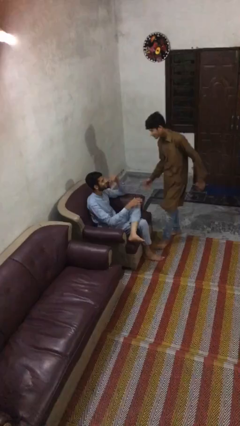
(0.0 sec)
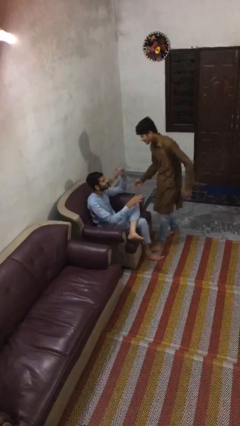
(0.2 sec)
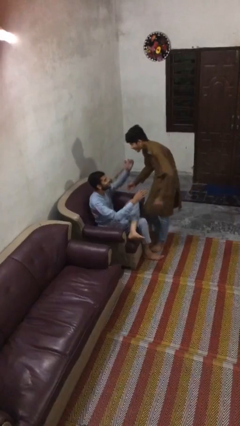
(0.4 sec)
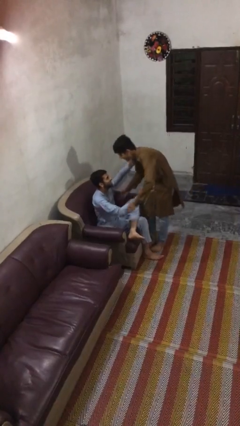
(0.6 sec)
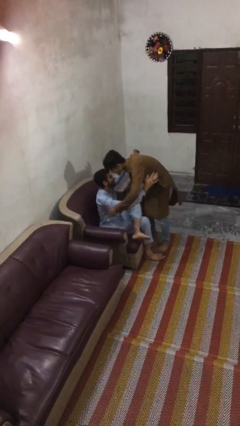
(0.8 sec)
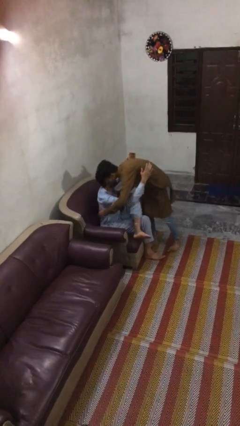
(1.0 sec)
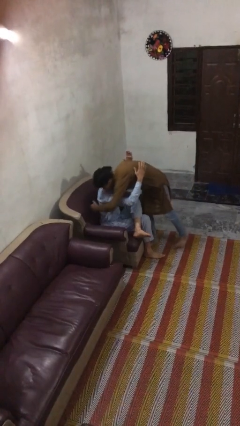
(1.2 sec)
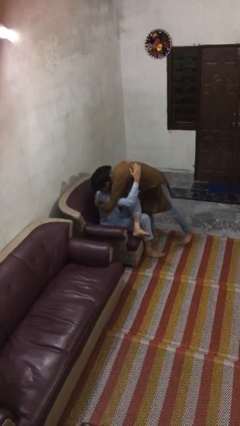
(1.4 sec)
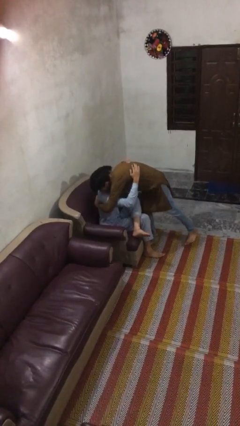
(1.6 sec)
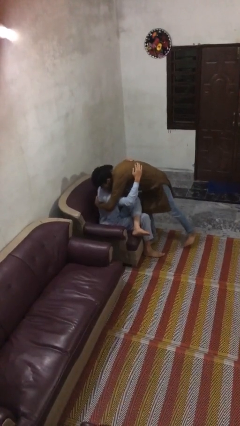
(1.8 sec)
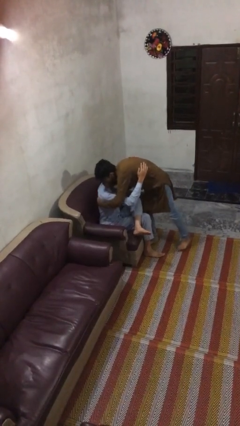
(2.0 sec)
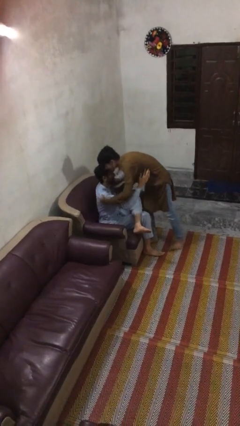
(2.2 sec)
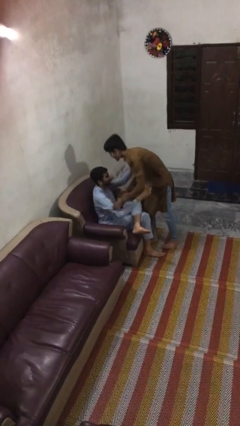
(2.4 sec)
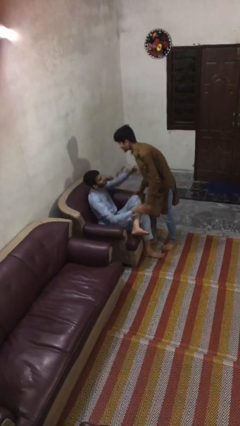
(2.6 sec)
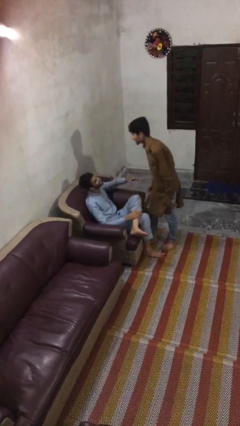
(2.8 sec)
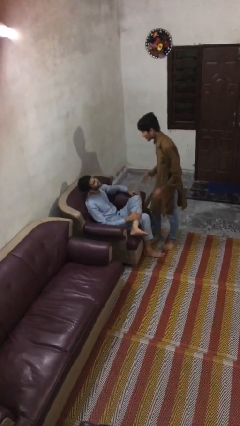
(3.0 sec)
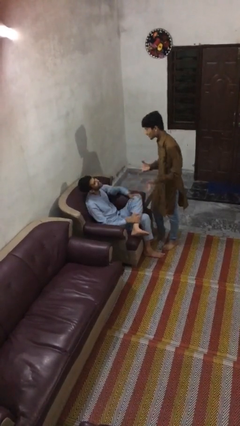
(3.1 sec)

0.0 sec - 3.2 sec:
person embraces person

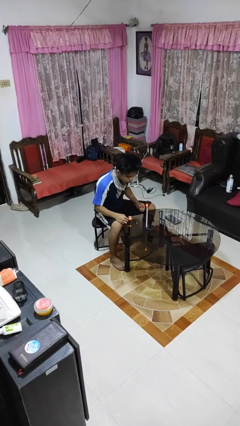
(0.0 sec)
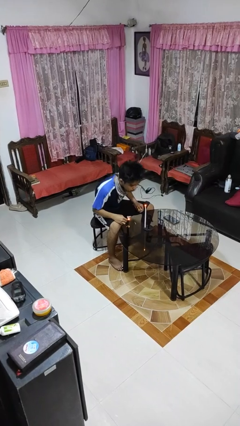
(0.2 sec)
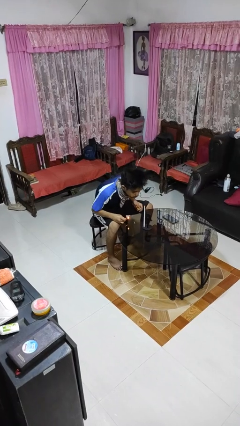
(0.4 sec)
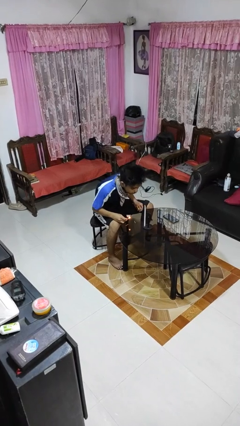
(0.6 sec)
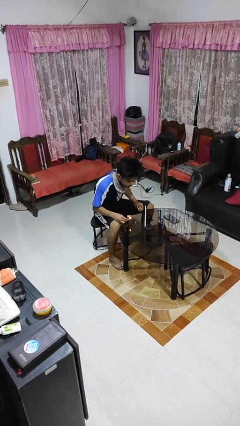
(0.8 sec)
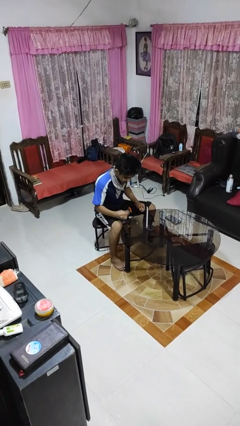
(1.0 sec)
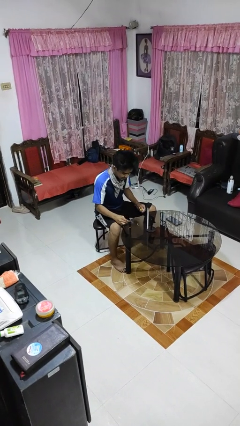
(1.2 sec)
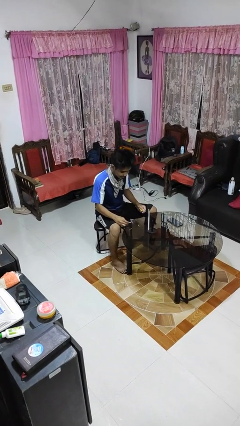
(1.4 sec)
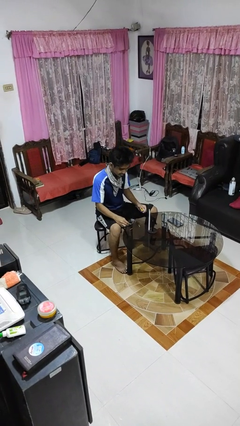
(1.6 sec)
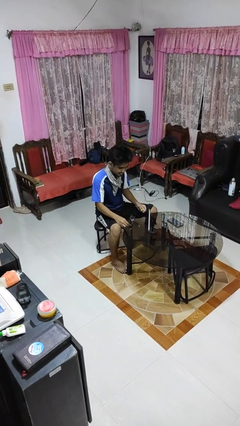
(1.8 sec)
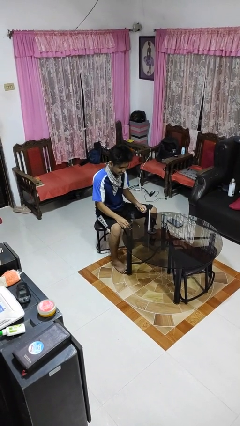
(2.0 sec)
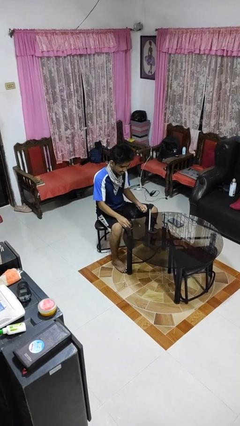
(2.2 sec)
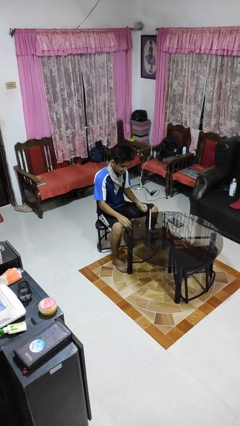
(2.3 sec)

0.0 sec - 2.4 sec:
person extinguishes candle

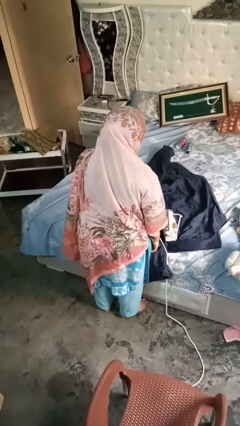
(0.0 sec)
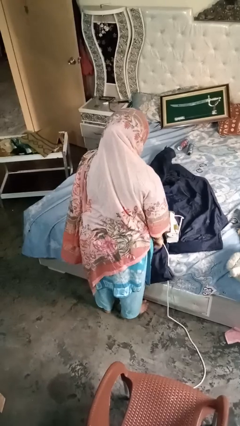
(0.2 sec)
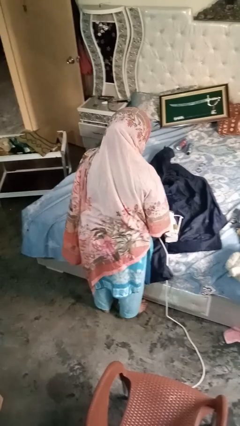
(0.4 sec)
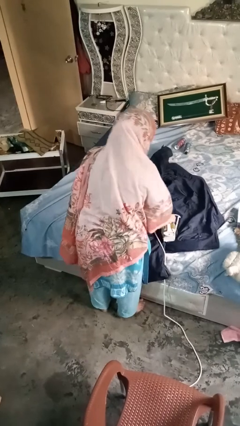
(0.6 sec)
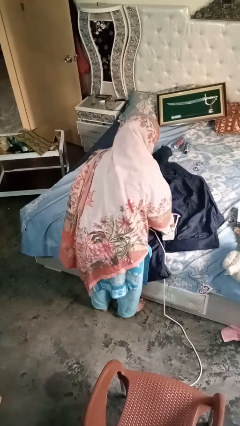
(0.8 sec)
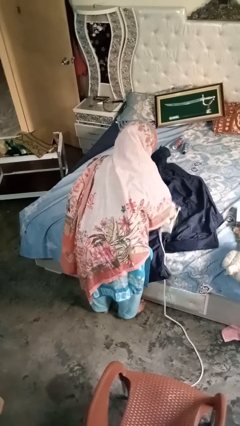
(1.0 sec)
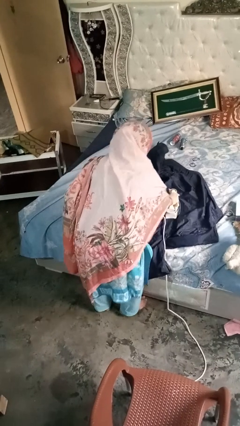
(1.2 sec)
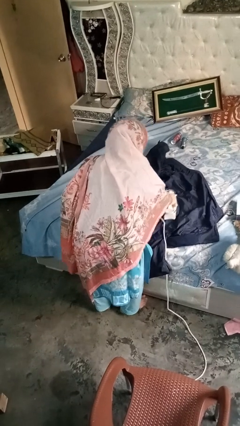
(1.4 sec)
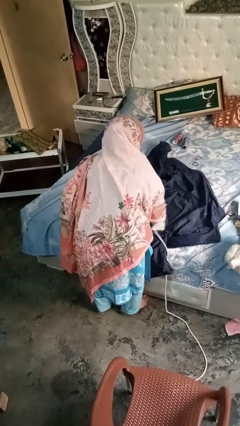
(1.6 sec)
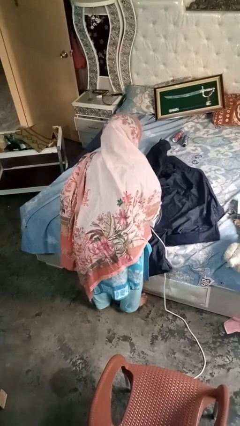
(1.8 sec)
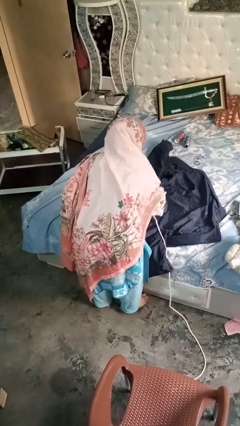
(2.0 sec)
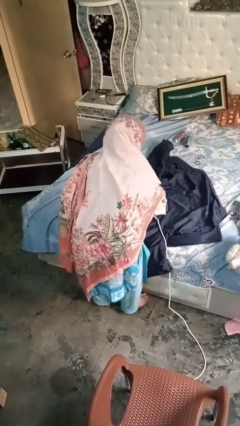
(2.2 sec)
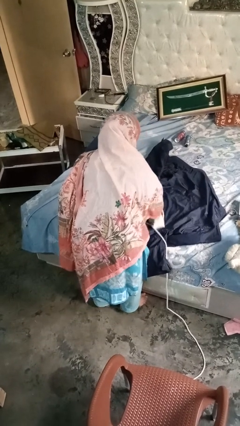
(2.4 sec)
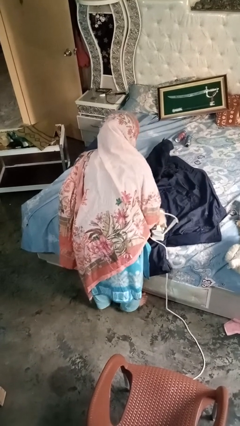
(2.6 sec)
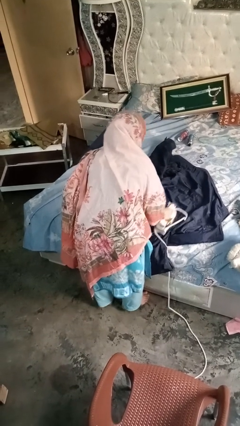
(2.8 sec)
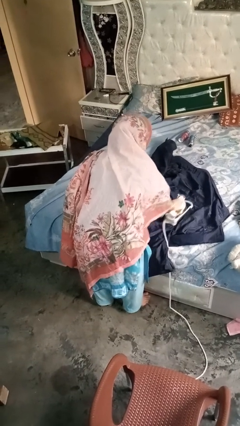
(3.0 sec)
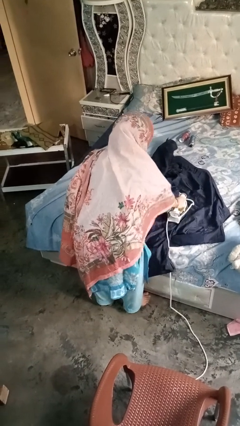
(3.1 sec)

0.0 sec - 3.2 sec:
person irons clothes

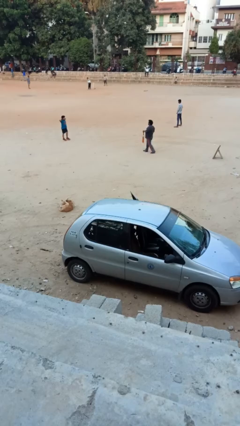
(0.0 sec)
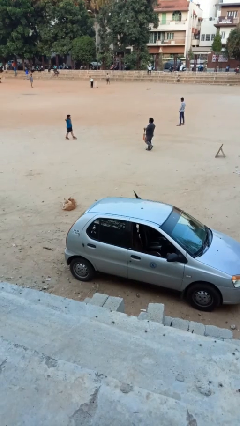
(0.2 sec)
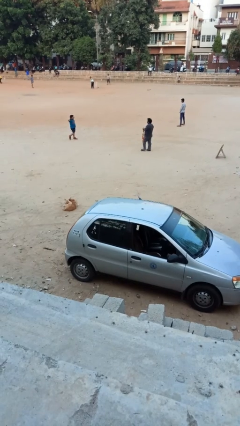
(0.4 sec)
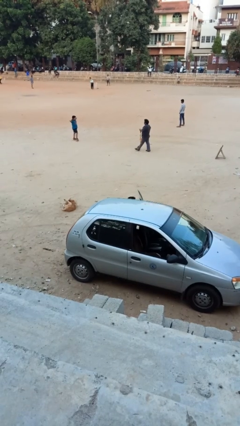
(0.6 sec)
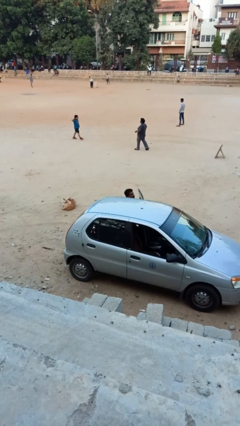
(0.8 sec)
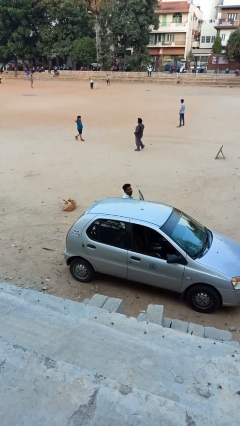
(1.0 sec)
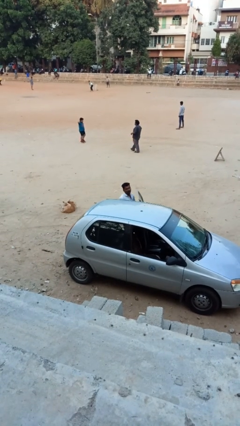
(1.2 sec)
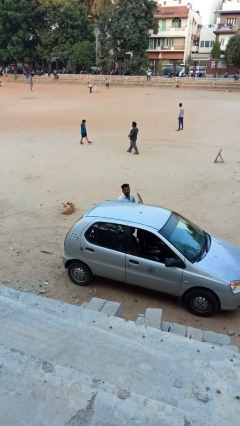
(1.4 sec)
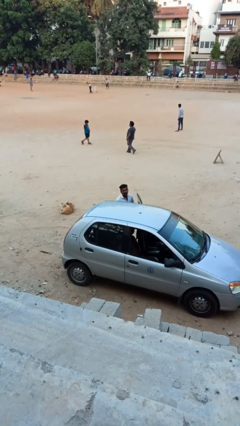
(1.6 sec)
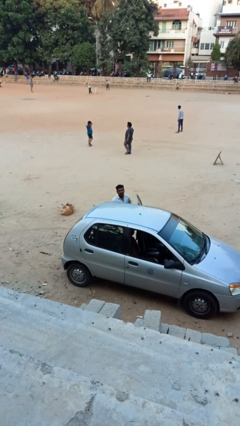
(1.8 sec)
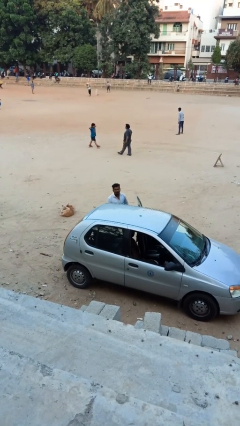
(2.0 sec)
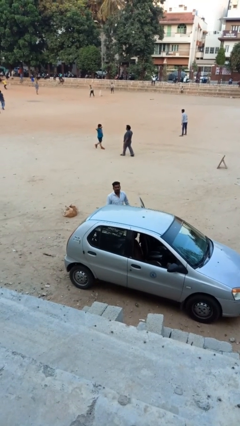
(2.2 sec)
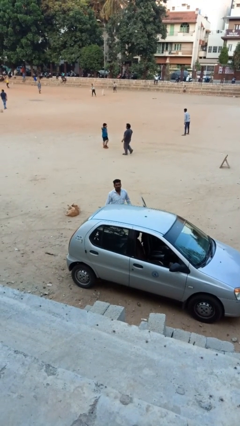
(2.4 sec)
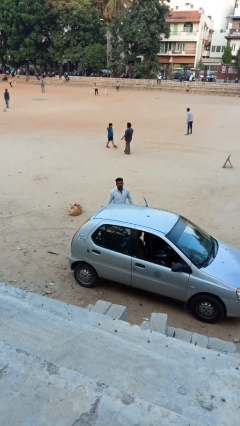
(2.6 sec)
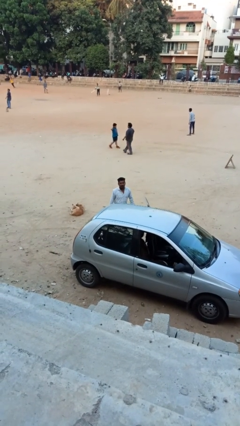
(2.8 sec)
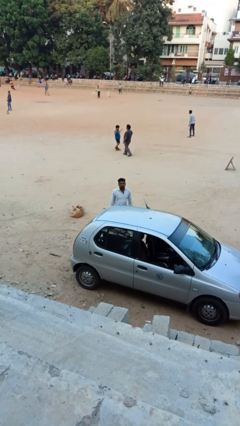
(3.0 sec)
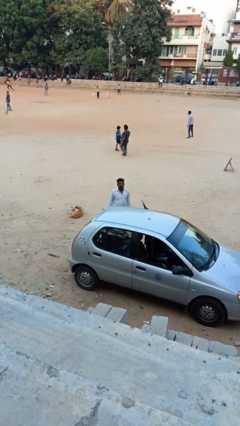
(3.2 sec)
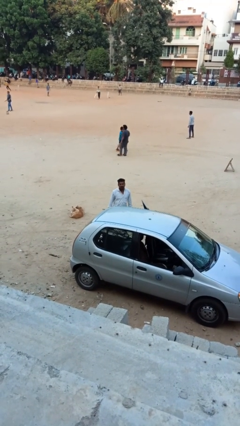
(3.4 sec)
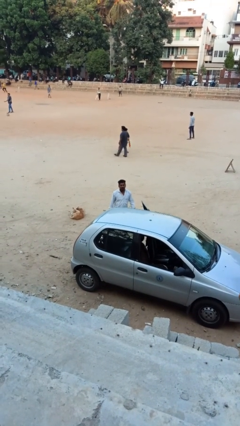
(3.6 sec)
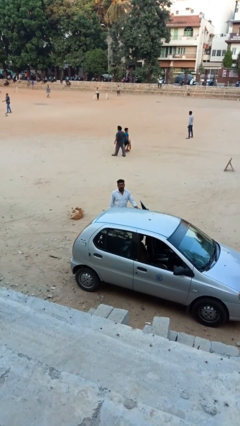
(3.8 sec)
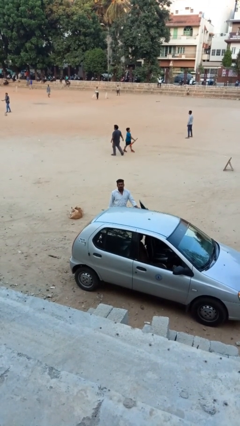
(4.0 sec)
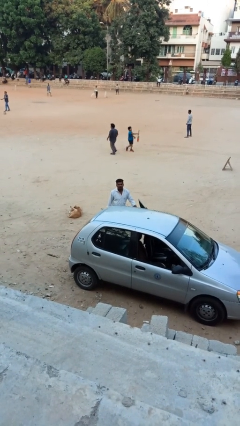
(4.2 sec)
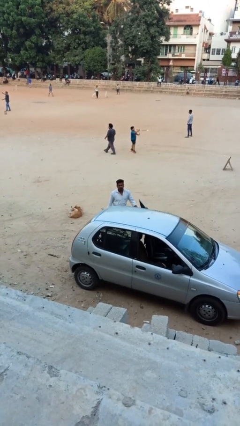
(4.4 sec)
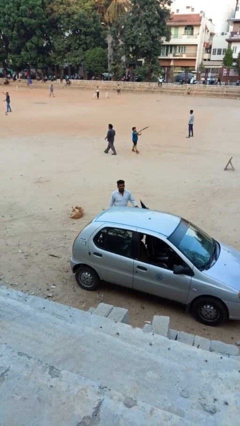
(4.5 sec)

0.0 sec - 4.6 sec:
person exits car

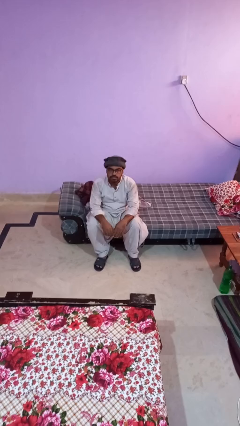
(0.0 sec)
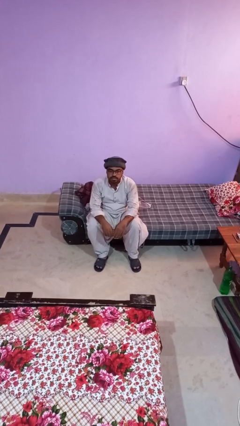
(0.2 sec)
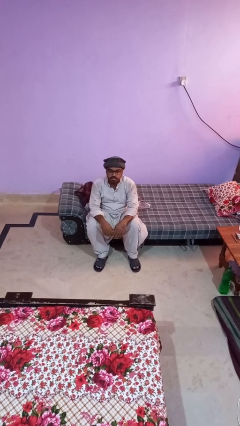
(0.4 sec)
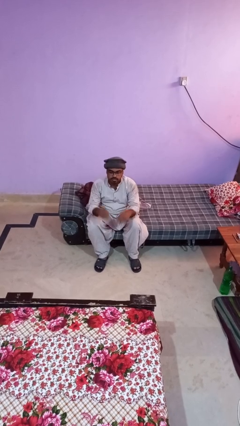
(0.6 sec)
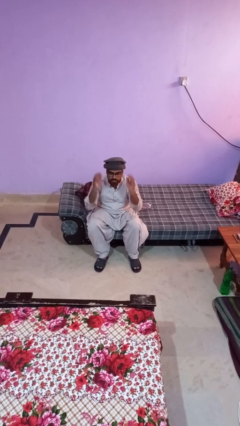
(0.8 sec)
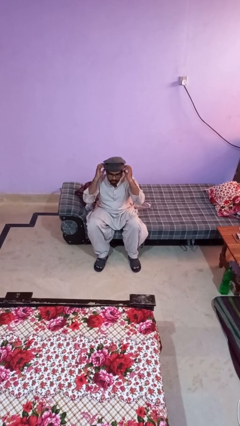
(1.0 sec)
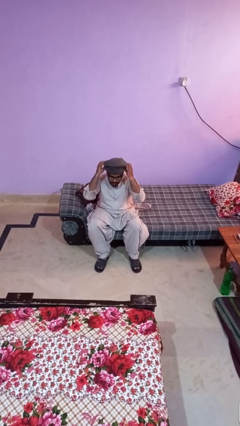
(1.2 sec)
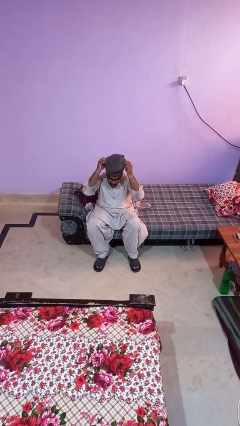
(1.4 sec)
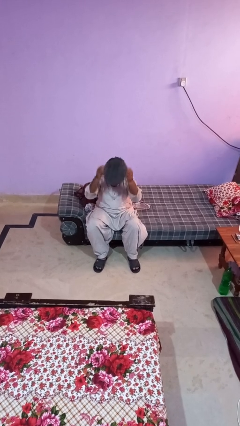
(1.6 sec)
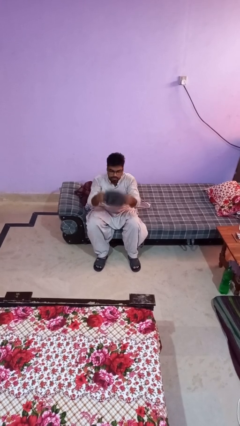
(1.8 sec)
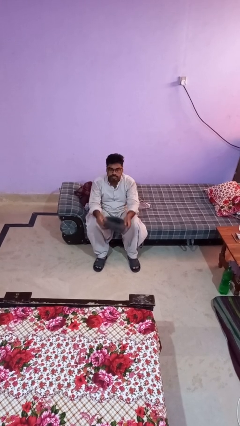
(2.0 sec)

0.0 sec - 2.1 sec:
person takes off hat

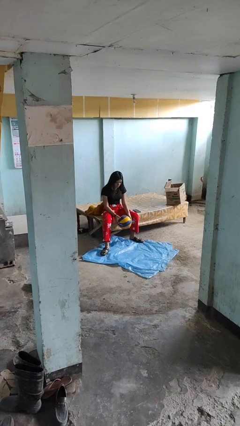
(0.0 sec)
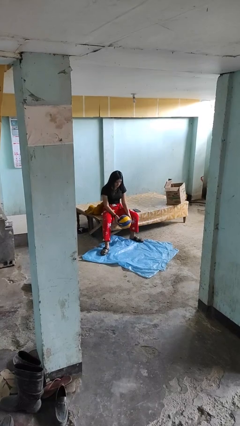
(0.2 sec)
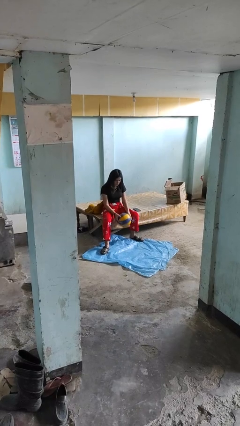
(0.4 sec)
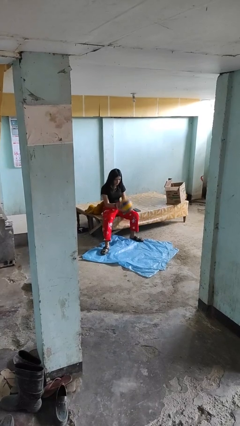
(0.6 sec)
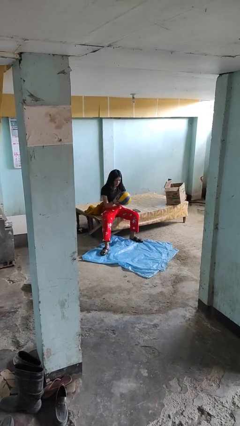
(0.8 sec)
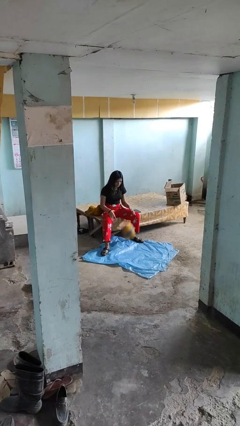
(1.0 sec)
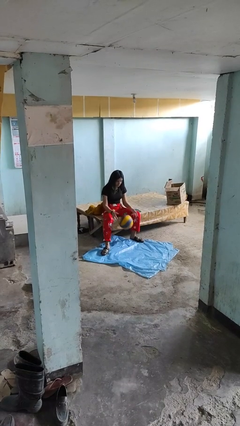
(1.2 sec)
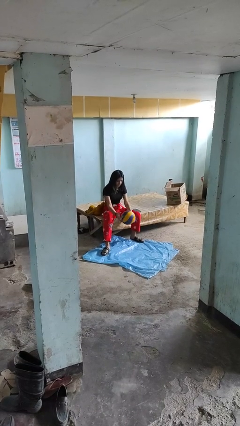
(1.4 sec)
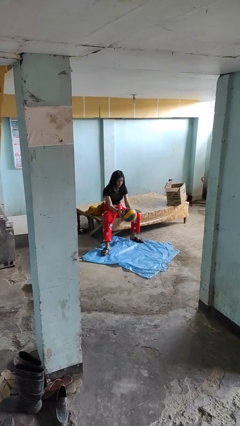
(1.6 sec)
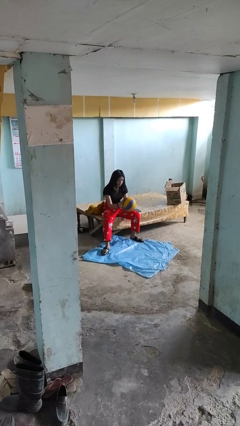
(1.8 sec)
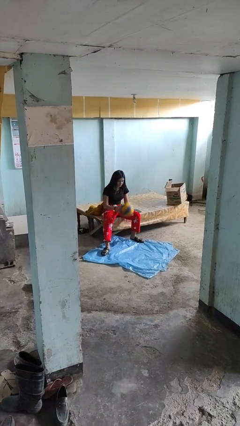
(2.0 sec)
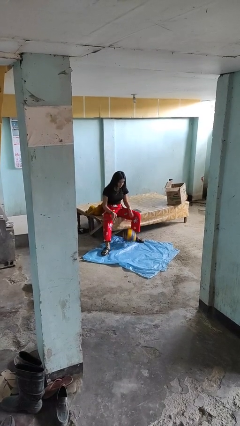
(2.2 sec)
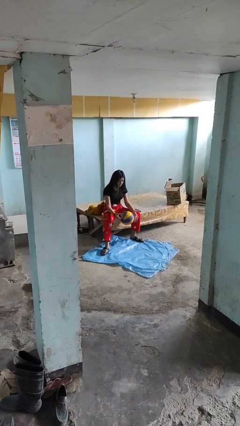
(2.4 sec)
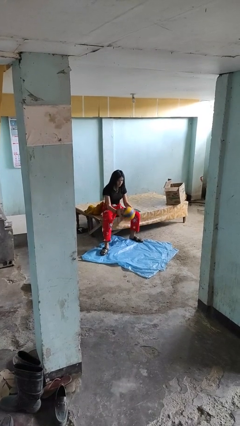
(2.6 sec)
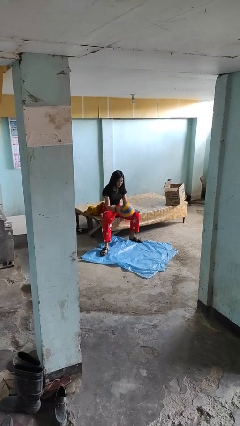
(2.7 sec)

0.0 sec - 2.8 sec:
person bounces ball on floor
